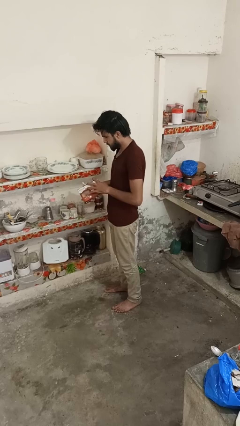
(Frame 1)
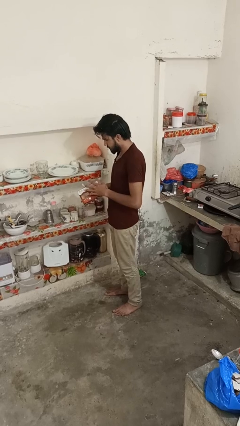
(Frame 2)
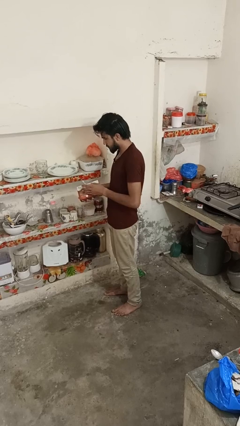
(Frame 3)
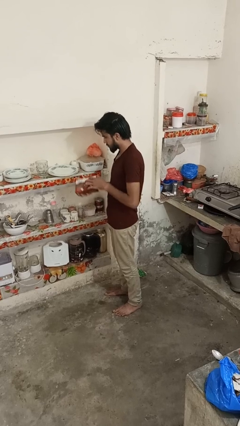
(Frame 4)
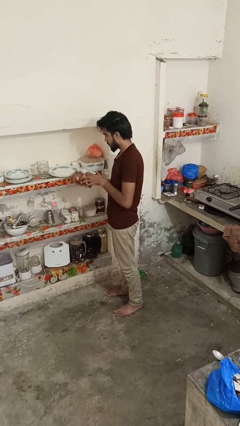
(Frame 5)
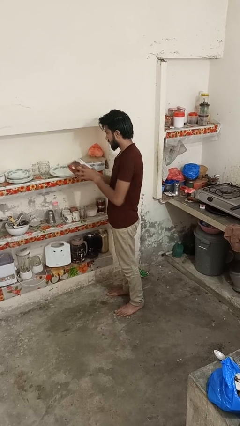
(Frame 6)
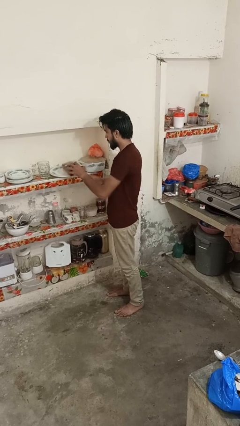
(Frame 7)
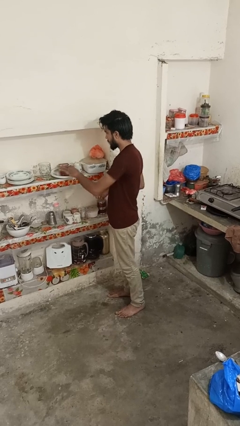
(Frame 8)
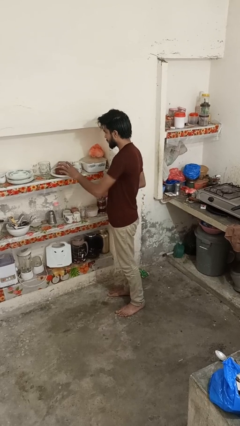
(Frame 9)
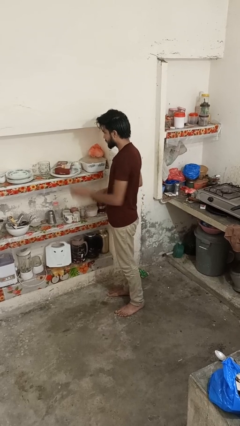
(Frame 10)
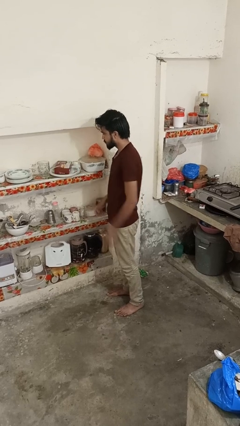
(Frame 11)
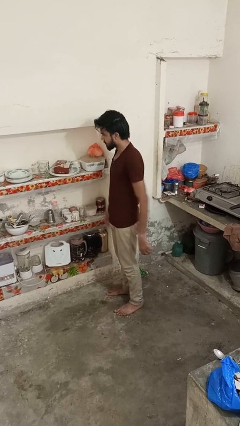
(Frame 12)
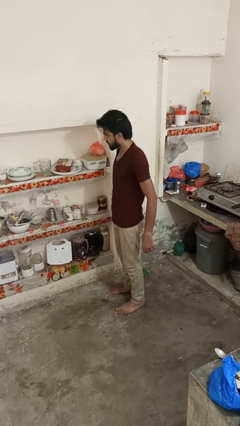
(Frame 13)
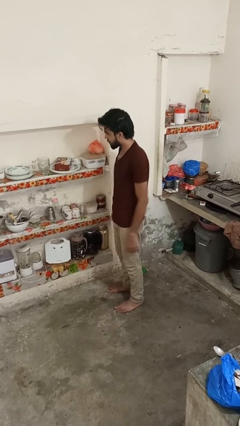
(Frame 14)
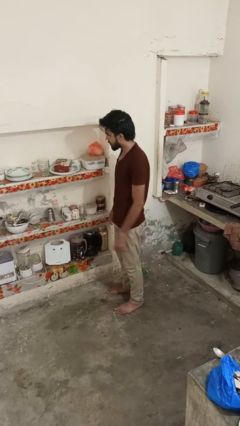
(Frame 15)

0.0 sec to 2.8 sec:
person puts down object into cabinet

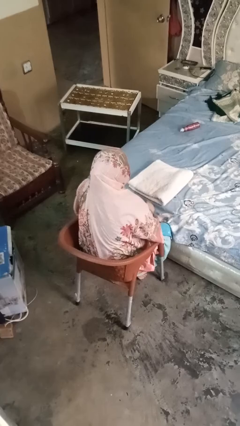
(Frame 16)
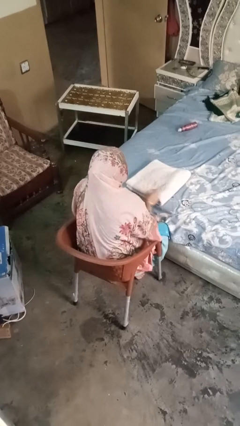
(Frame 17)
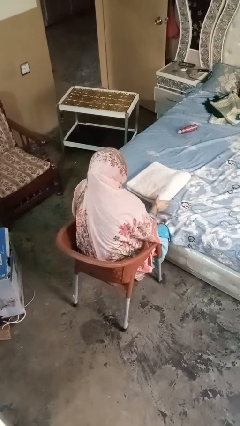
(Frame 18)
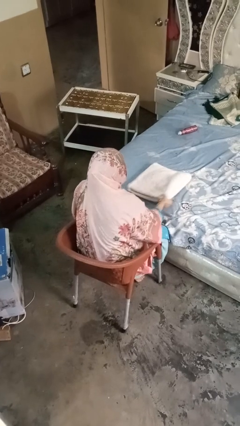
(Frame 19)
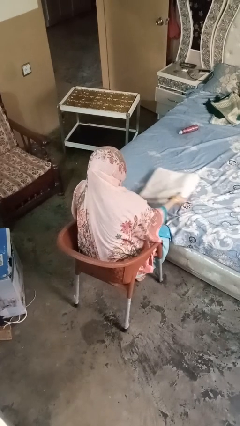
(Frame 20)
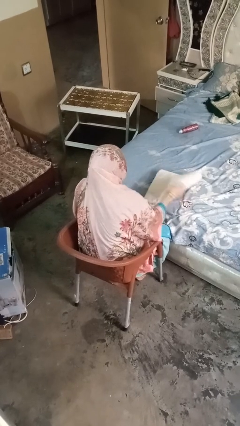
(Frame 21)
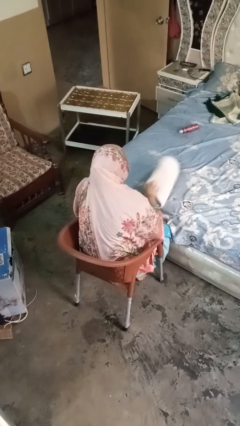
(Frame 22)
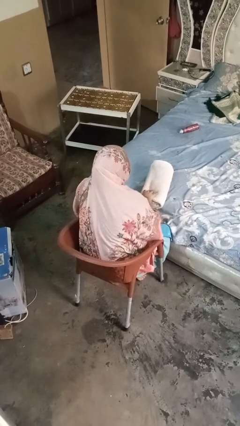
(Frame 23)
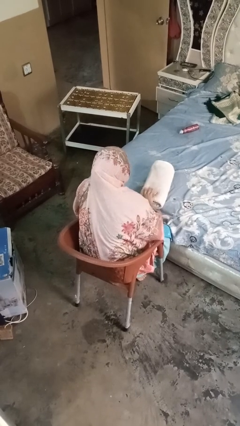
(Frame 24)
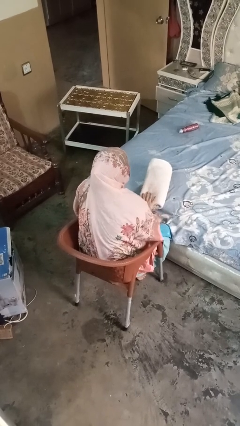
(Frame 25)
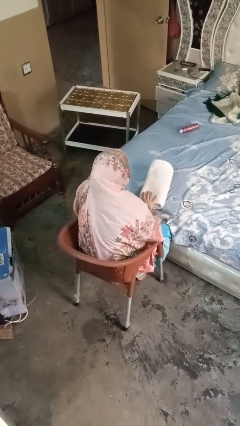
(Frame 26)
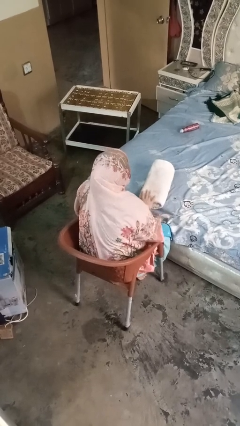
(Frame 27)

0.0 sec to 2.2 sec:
person folds towel

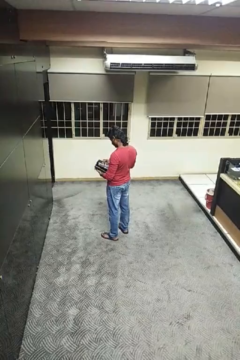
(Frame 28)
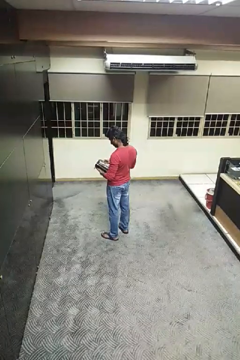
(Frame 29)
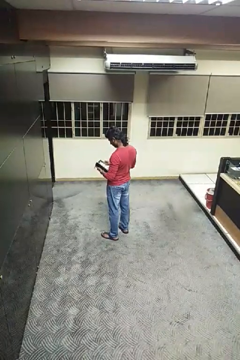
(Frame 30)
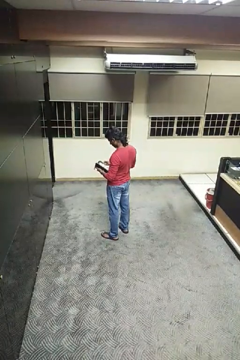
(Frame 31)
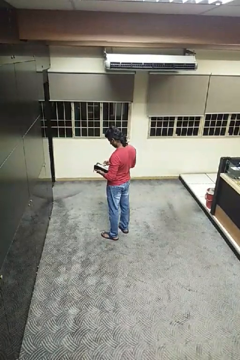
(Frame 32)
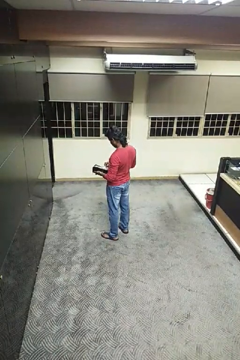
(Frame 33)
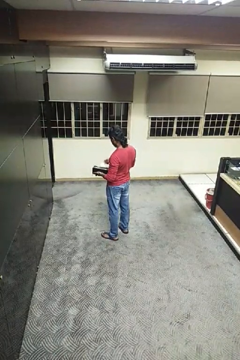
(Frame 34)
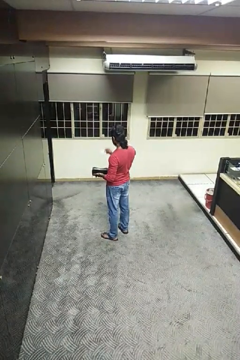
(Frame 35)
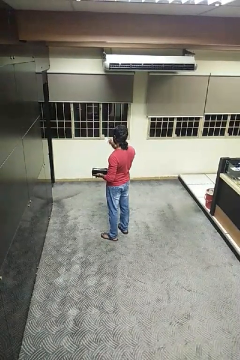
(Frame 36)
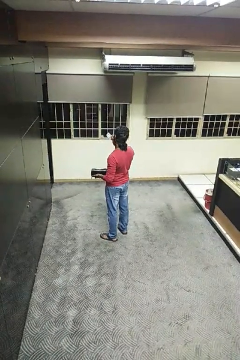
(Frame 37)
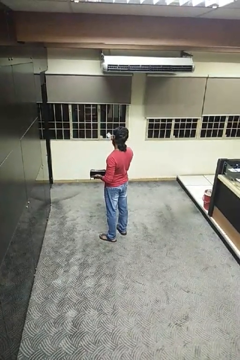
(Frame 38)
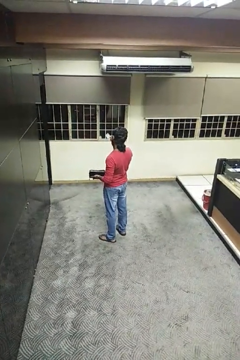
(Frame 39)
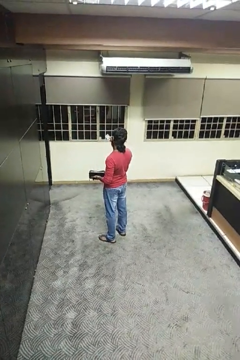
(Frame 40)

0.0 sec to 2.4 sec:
person takes object from purse

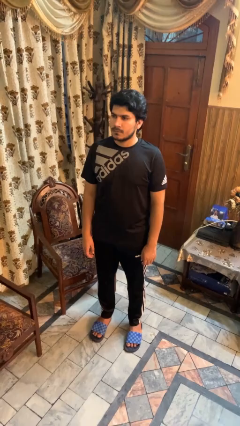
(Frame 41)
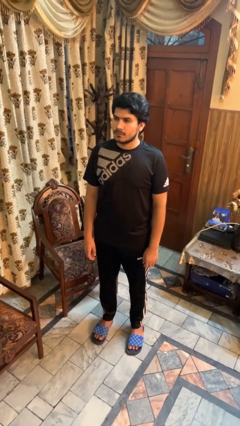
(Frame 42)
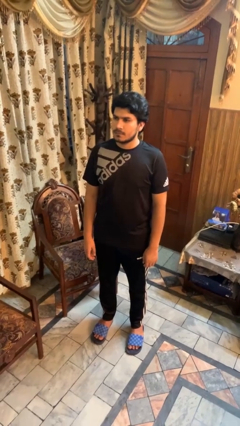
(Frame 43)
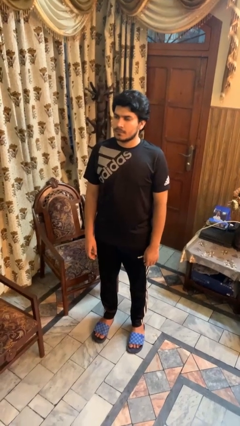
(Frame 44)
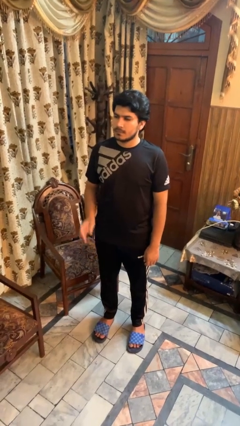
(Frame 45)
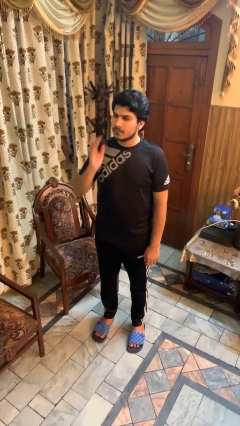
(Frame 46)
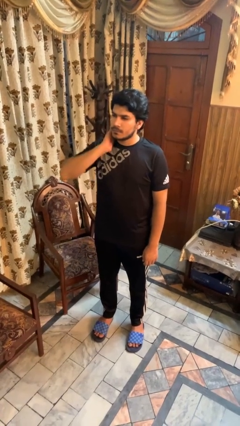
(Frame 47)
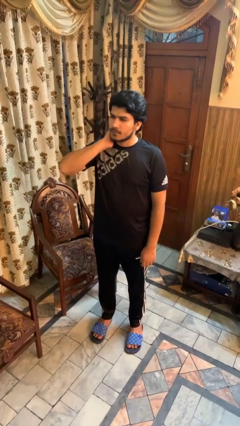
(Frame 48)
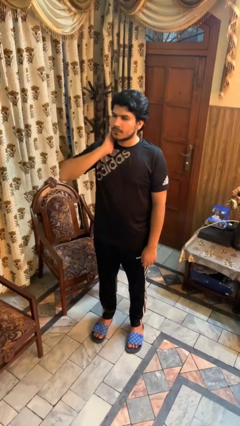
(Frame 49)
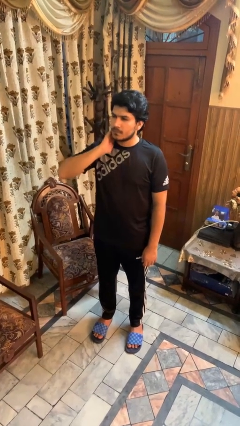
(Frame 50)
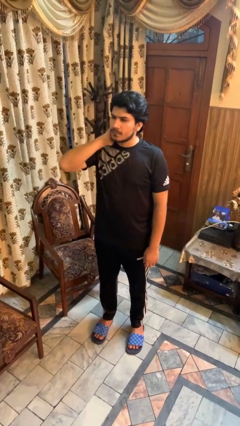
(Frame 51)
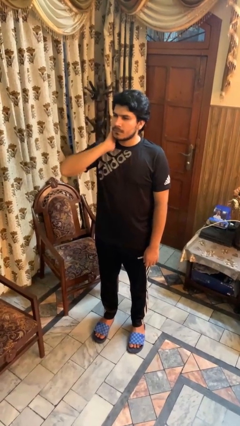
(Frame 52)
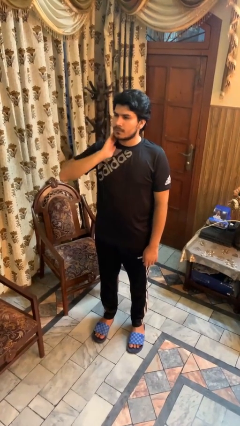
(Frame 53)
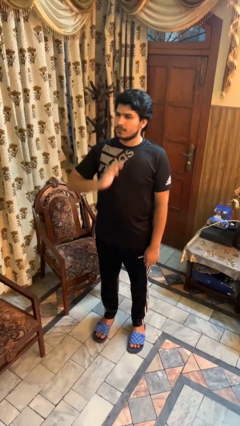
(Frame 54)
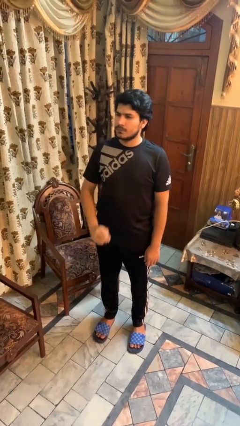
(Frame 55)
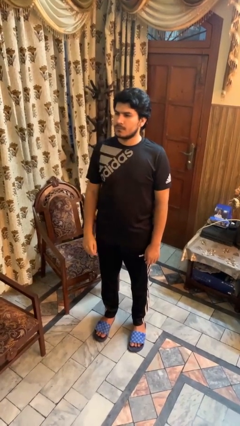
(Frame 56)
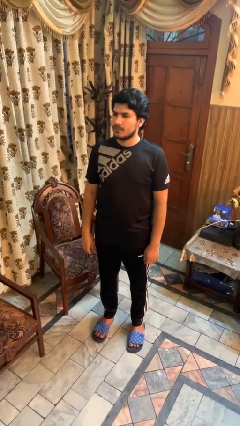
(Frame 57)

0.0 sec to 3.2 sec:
person rubs neck

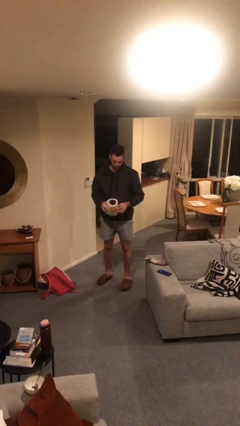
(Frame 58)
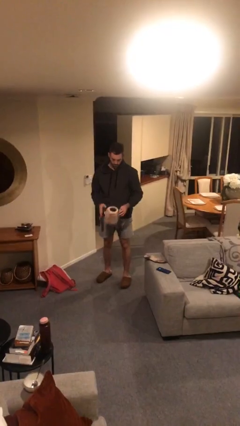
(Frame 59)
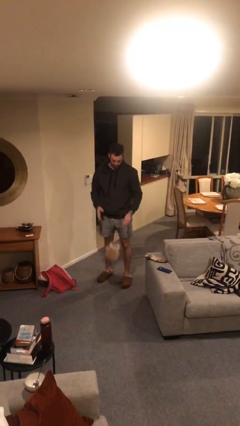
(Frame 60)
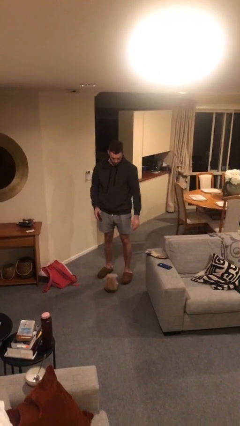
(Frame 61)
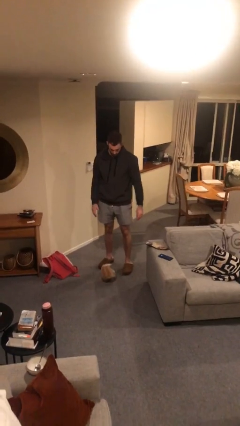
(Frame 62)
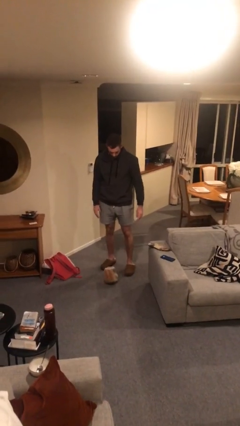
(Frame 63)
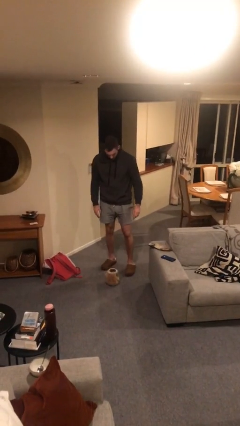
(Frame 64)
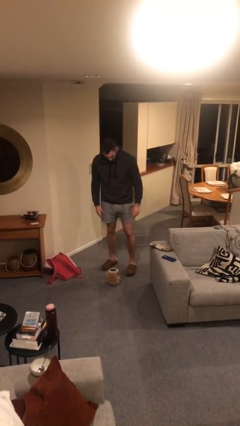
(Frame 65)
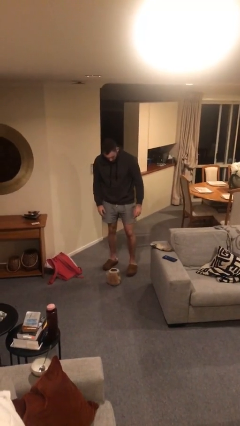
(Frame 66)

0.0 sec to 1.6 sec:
person drops object

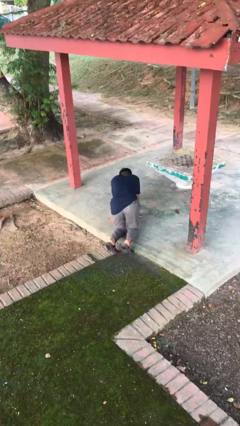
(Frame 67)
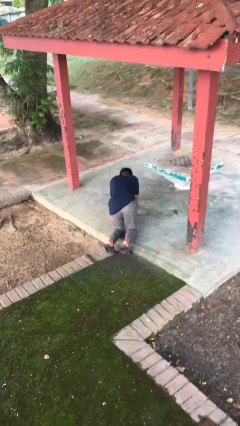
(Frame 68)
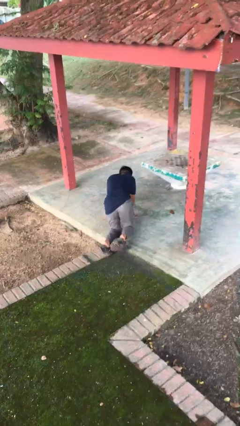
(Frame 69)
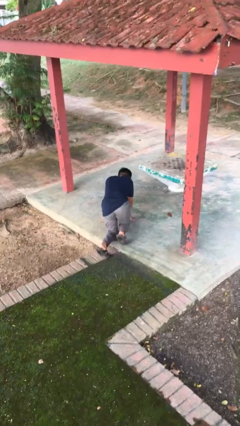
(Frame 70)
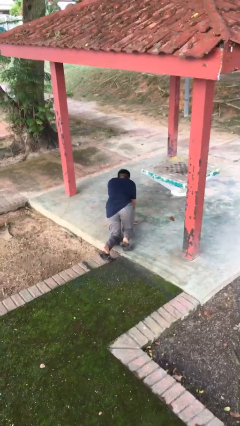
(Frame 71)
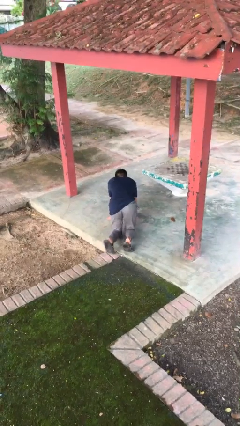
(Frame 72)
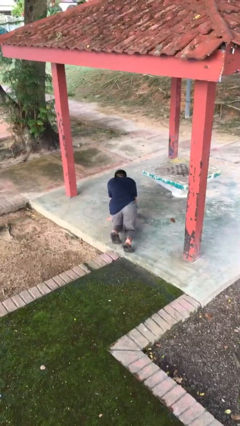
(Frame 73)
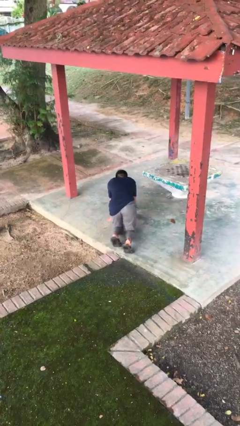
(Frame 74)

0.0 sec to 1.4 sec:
person crawls

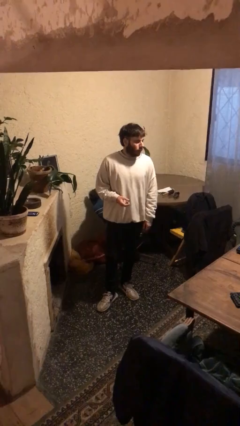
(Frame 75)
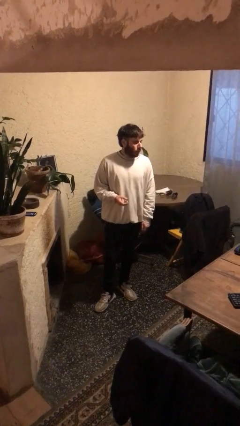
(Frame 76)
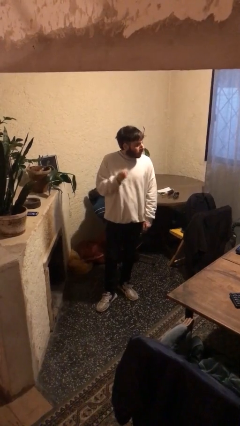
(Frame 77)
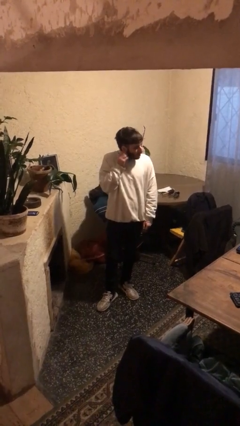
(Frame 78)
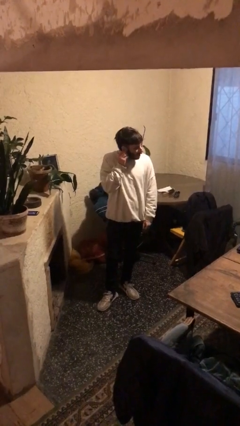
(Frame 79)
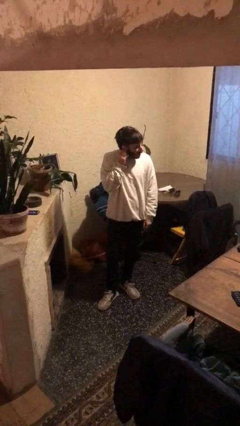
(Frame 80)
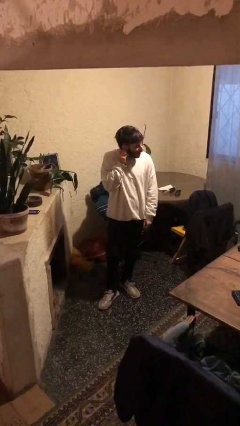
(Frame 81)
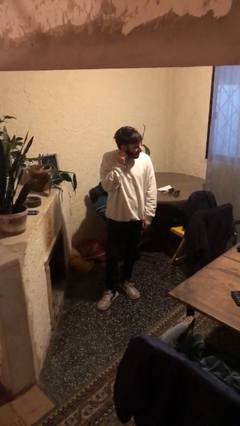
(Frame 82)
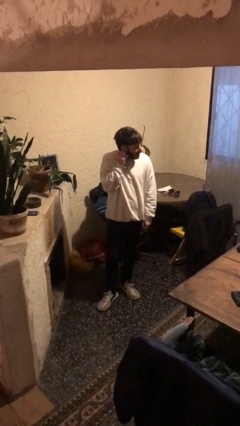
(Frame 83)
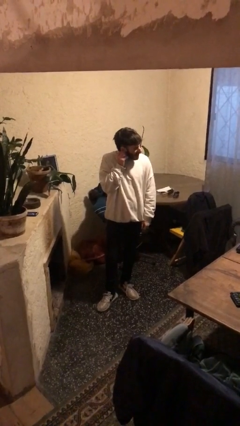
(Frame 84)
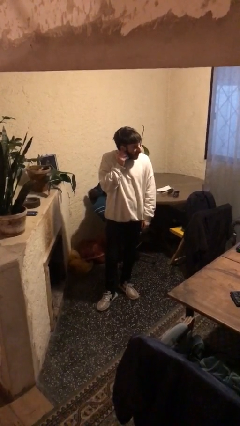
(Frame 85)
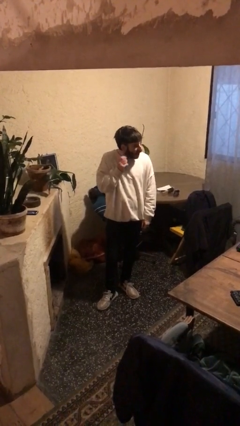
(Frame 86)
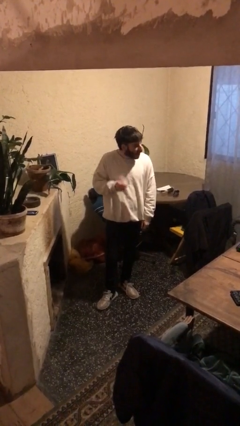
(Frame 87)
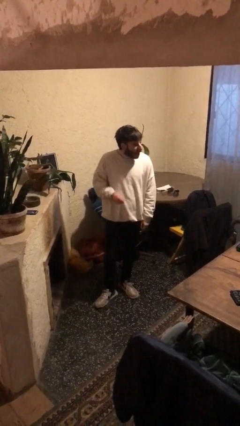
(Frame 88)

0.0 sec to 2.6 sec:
person puts on earrings

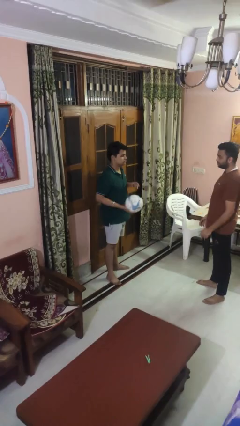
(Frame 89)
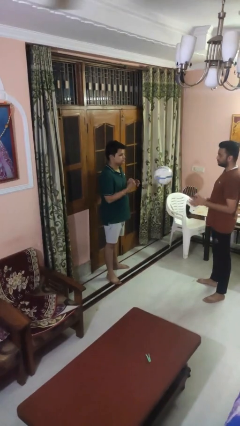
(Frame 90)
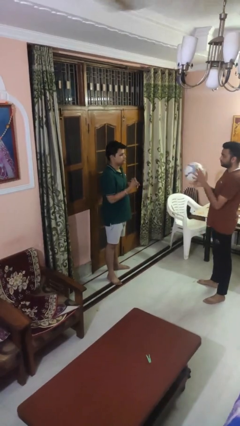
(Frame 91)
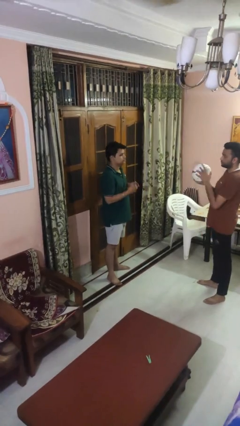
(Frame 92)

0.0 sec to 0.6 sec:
person throws object to person

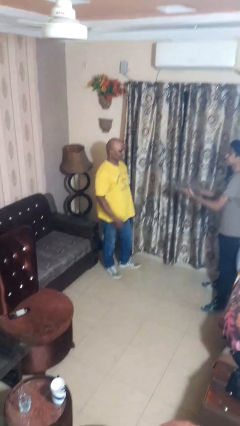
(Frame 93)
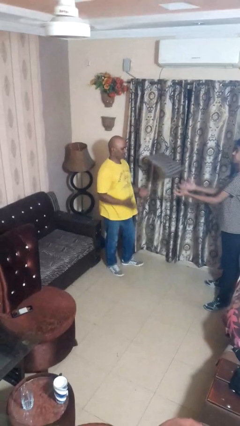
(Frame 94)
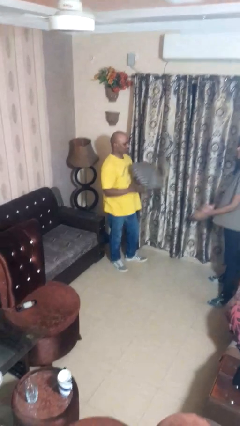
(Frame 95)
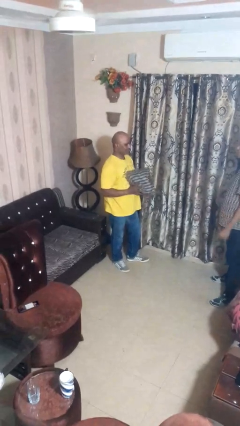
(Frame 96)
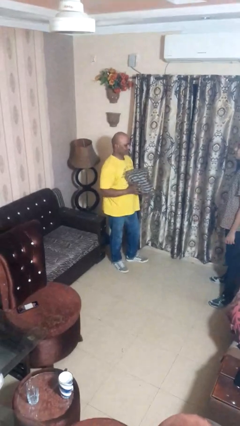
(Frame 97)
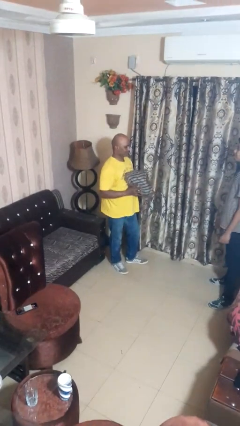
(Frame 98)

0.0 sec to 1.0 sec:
person catches object from person
